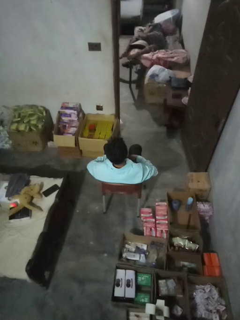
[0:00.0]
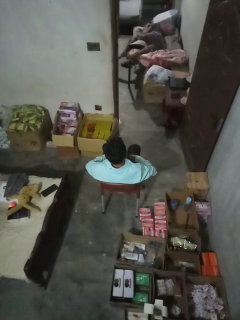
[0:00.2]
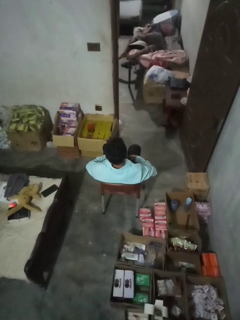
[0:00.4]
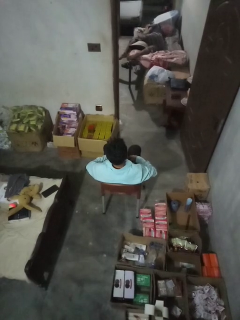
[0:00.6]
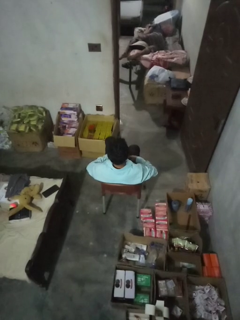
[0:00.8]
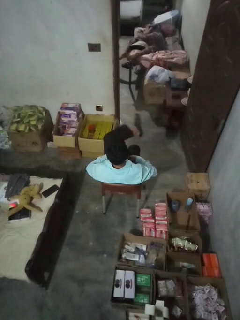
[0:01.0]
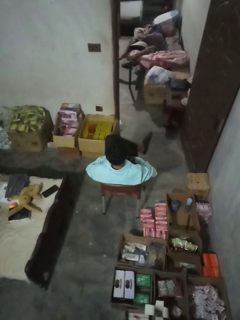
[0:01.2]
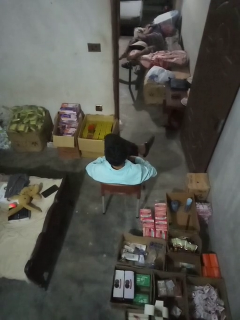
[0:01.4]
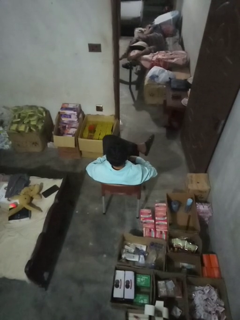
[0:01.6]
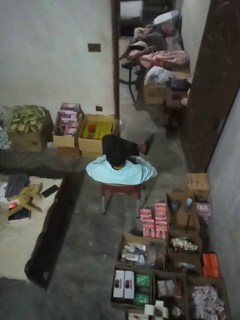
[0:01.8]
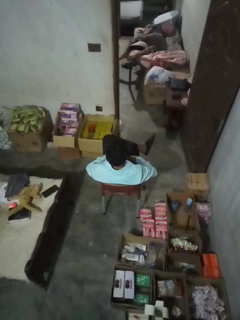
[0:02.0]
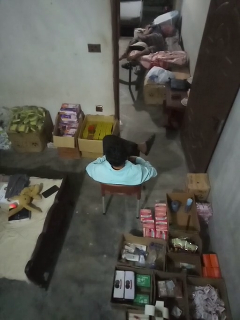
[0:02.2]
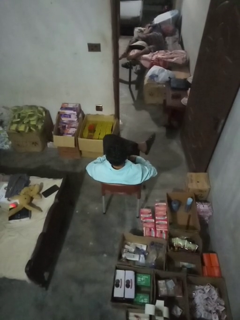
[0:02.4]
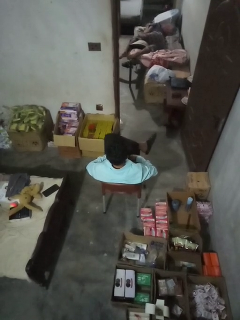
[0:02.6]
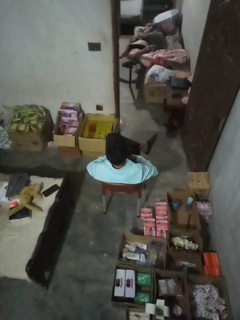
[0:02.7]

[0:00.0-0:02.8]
person crosses legs

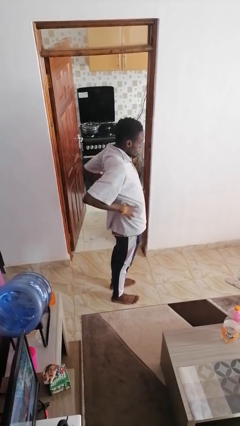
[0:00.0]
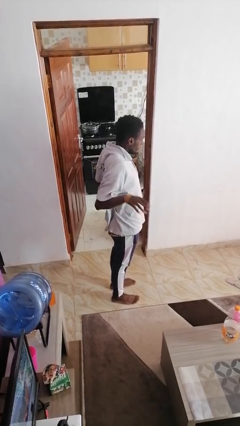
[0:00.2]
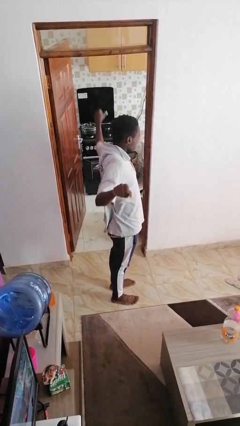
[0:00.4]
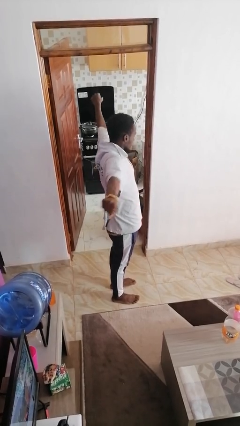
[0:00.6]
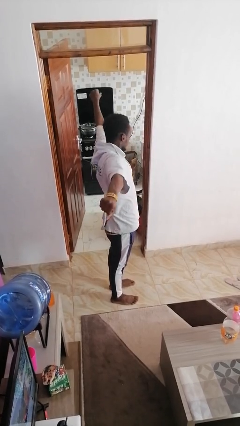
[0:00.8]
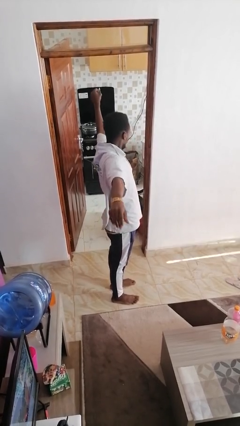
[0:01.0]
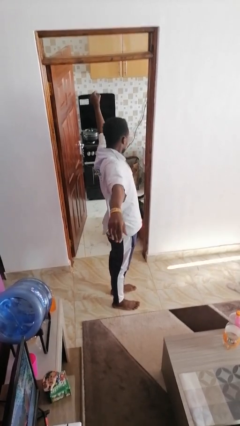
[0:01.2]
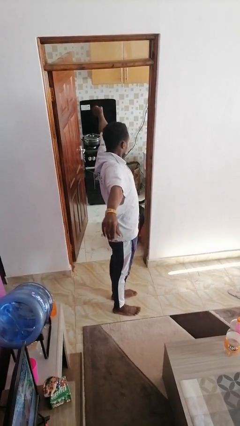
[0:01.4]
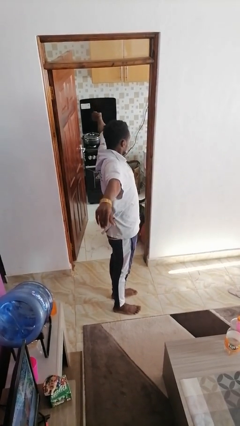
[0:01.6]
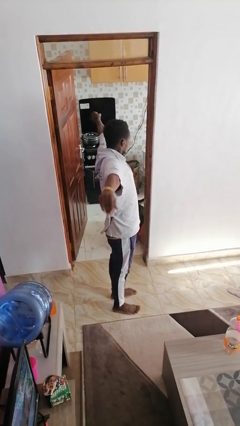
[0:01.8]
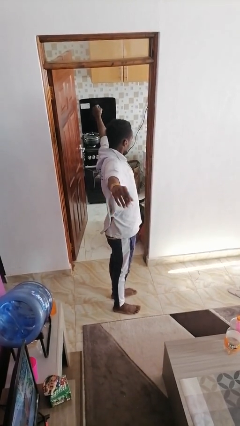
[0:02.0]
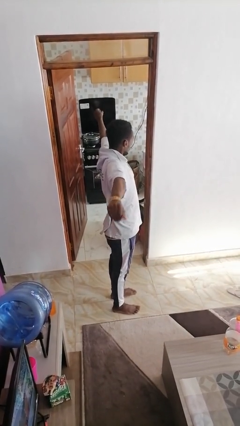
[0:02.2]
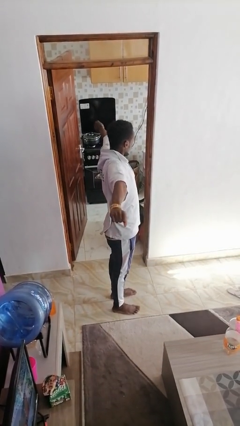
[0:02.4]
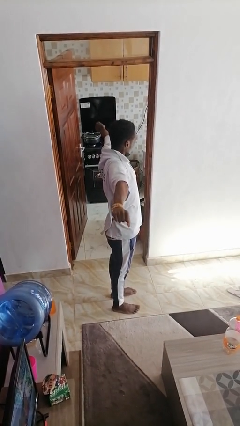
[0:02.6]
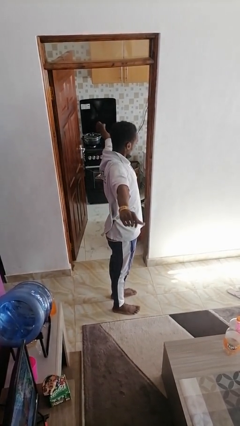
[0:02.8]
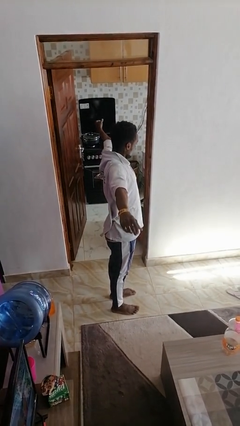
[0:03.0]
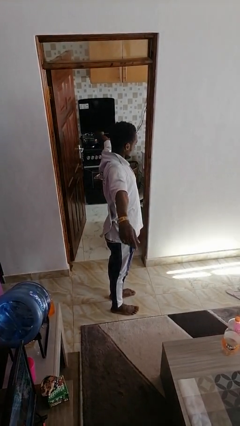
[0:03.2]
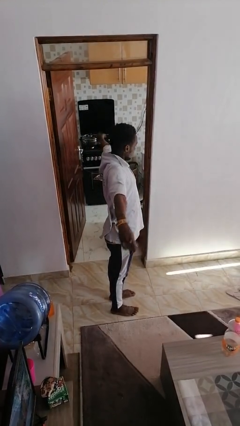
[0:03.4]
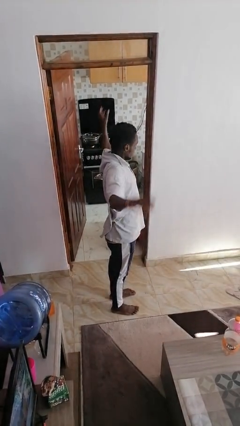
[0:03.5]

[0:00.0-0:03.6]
person stretches arms to side

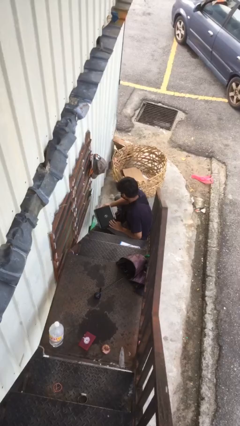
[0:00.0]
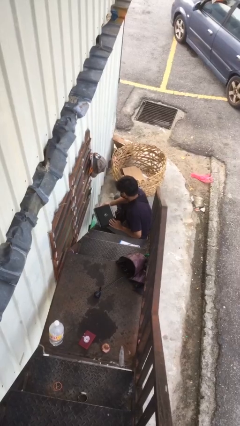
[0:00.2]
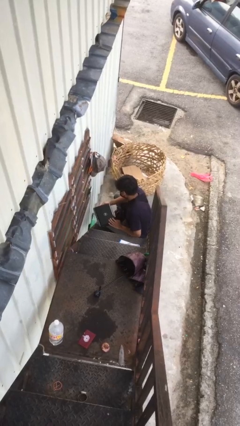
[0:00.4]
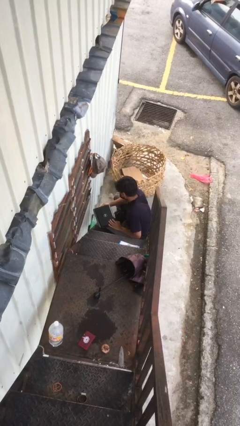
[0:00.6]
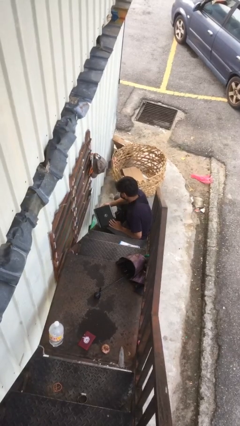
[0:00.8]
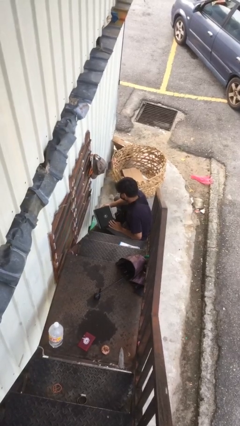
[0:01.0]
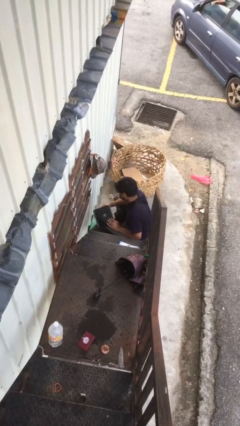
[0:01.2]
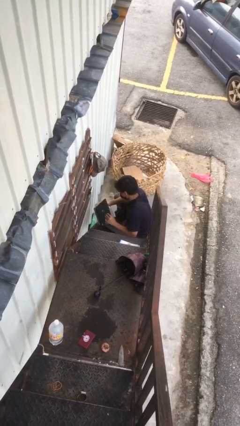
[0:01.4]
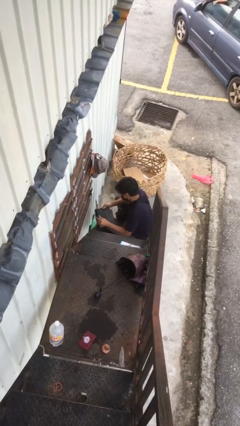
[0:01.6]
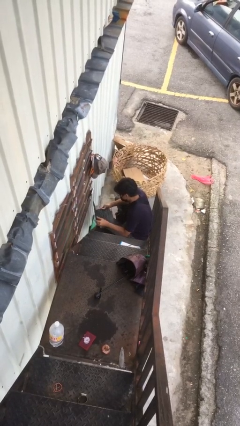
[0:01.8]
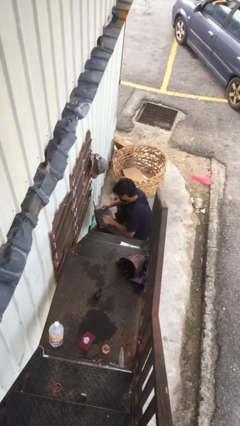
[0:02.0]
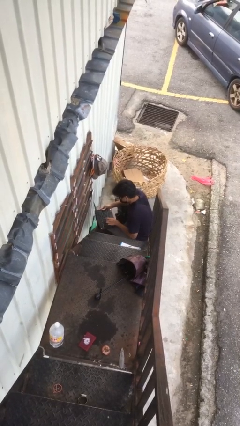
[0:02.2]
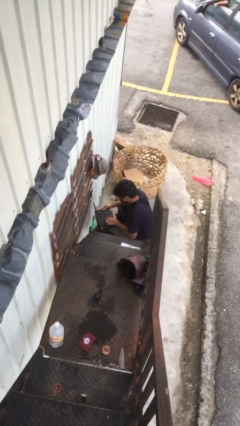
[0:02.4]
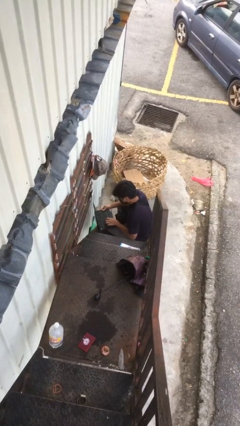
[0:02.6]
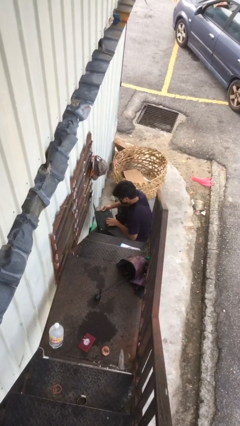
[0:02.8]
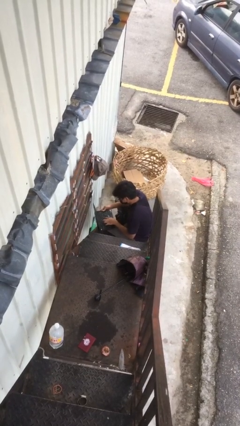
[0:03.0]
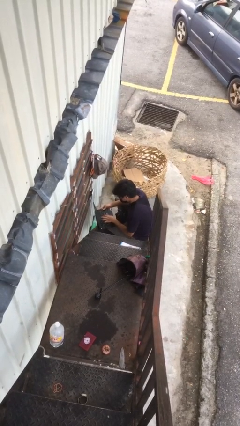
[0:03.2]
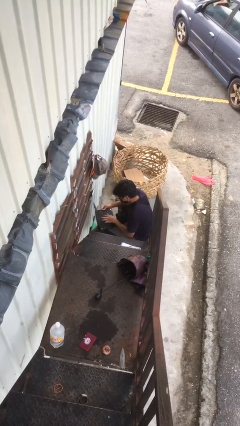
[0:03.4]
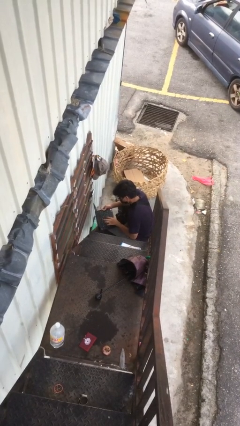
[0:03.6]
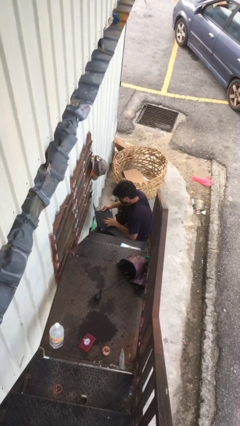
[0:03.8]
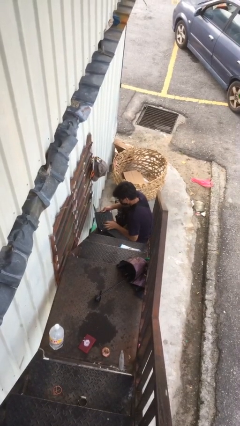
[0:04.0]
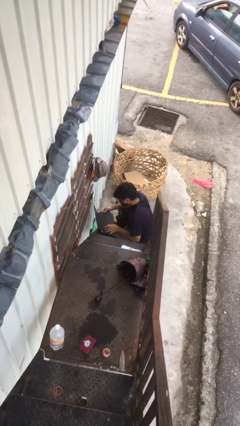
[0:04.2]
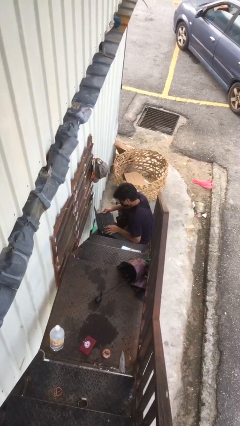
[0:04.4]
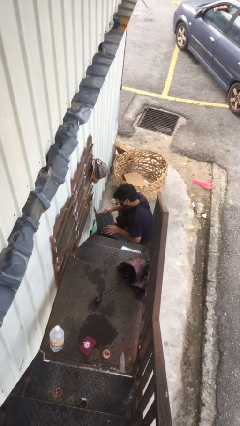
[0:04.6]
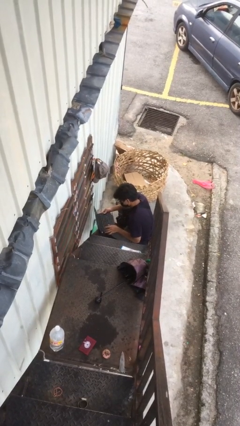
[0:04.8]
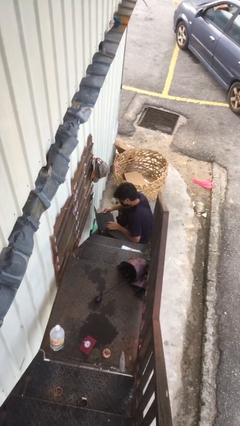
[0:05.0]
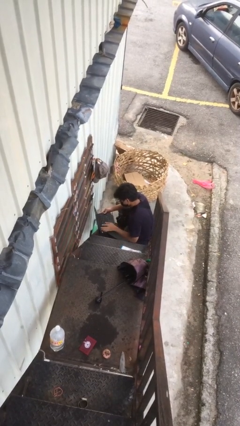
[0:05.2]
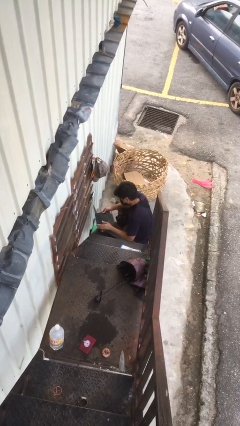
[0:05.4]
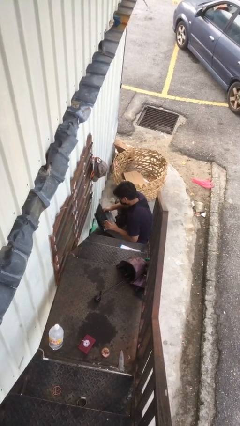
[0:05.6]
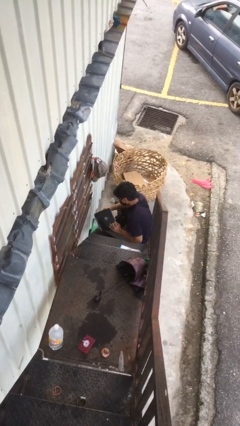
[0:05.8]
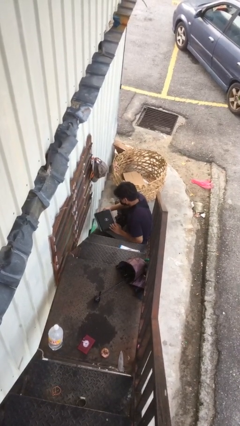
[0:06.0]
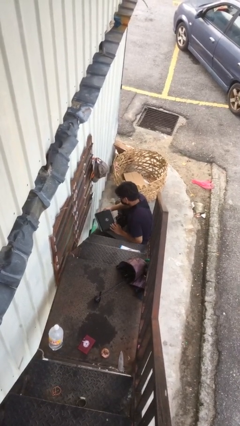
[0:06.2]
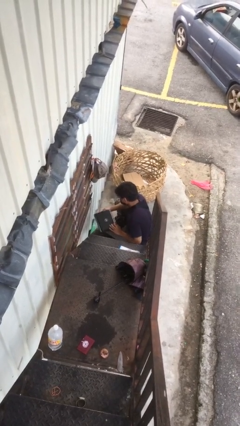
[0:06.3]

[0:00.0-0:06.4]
person interacts with laptop

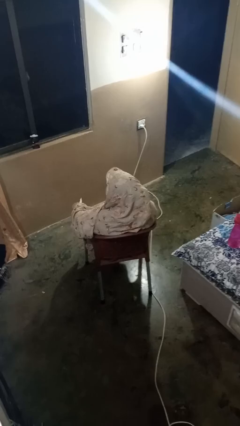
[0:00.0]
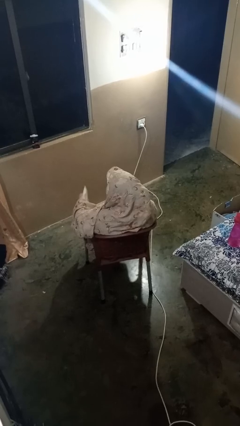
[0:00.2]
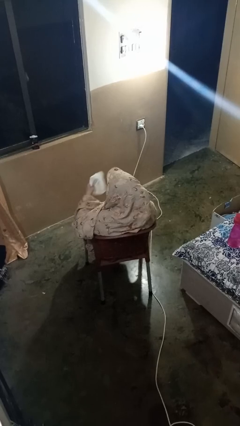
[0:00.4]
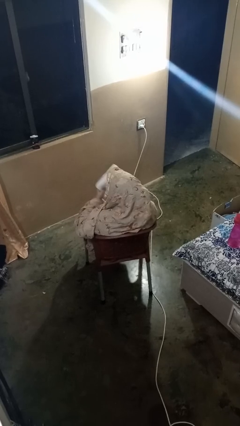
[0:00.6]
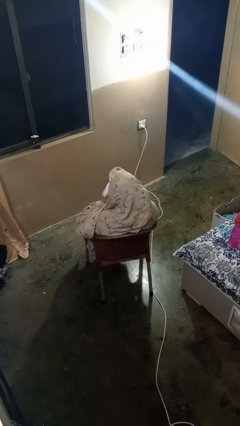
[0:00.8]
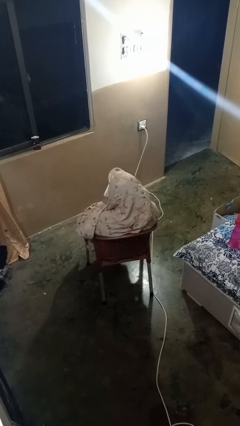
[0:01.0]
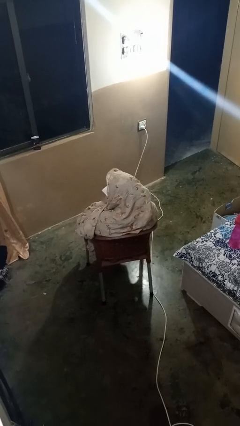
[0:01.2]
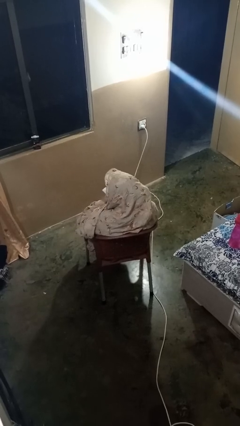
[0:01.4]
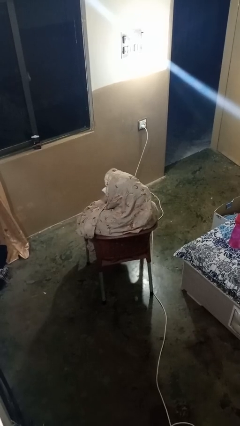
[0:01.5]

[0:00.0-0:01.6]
person wipes mouth with napkin

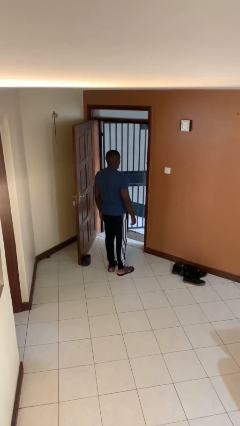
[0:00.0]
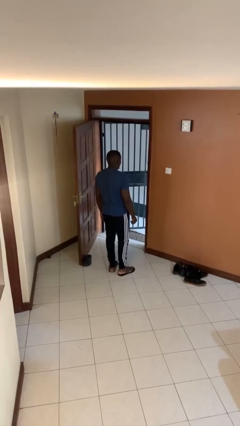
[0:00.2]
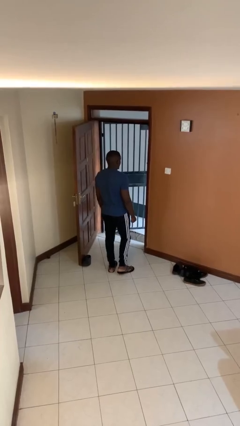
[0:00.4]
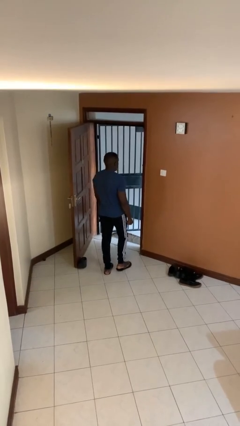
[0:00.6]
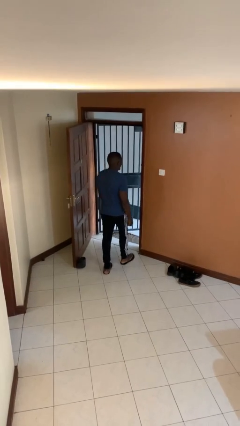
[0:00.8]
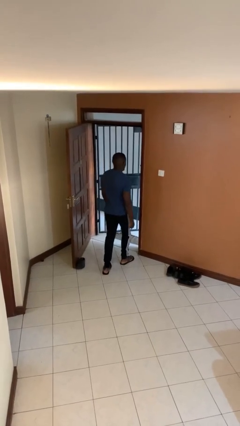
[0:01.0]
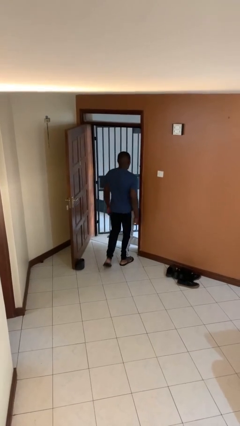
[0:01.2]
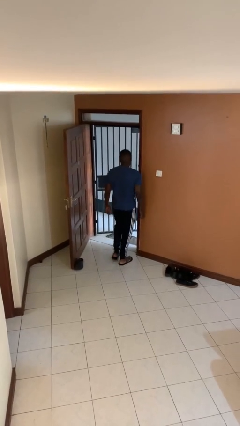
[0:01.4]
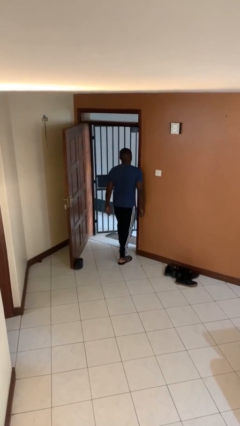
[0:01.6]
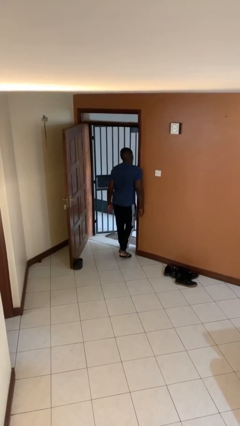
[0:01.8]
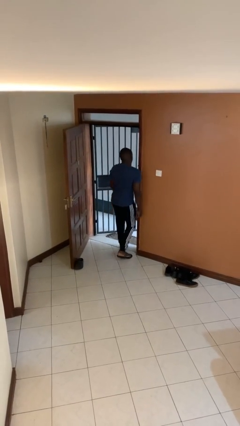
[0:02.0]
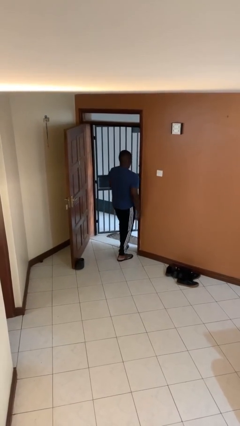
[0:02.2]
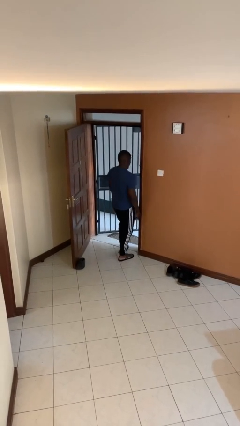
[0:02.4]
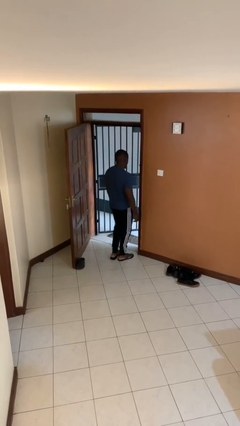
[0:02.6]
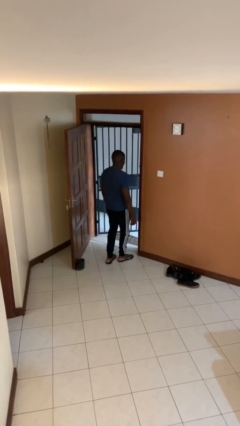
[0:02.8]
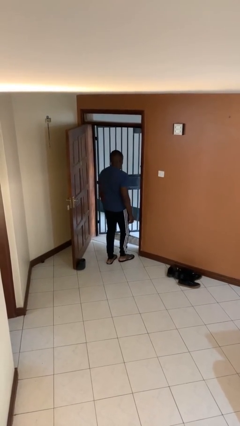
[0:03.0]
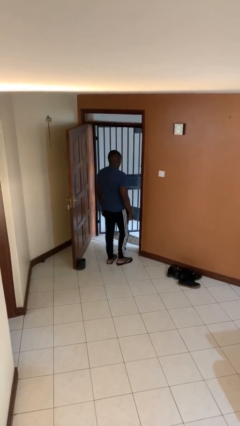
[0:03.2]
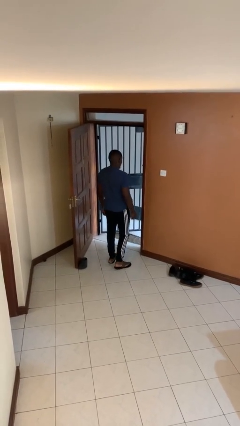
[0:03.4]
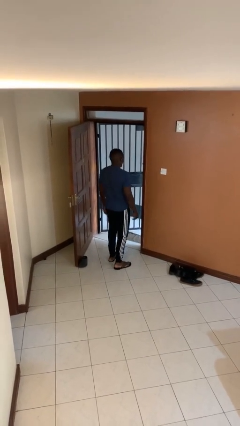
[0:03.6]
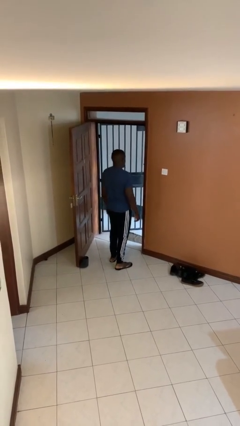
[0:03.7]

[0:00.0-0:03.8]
person bumps into wall

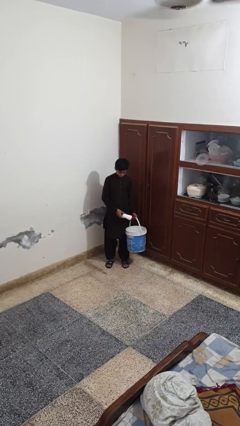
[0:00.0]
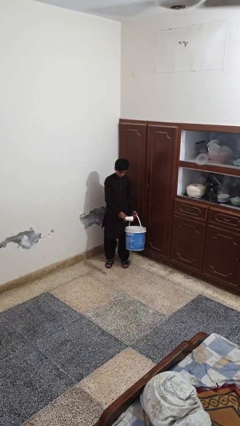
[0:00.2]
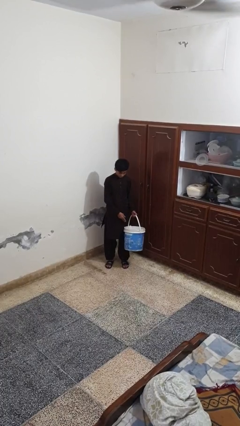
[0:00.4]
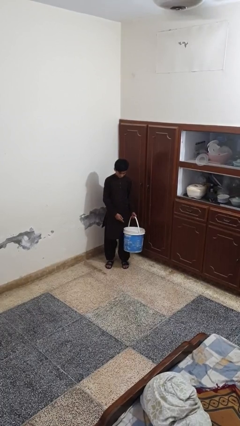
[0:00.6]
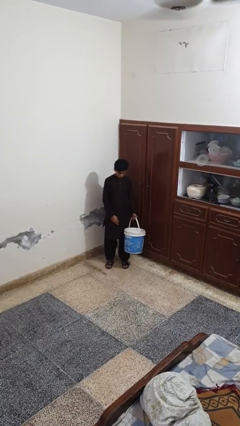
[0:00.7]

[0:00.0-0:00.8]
person puts object into basket
